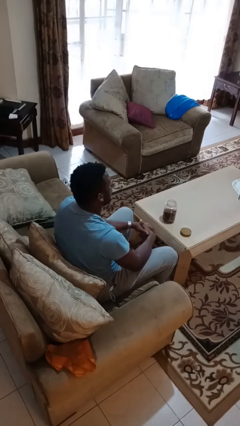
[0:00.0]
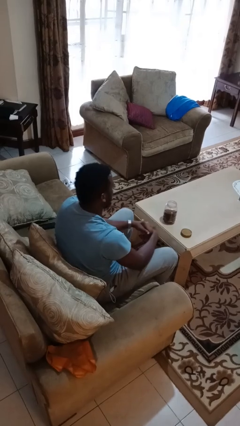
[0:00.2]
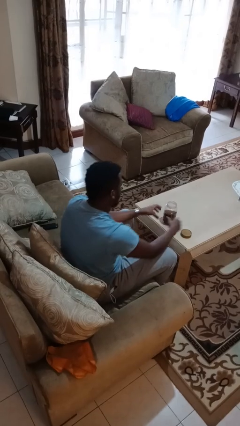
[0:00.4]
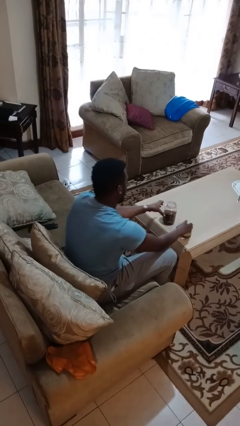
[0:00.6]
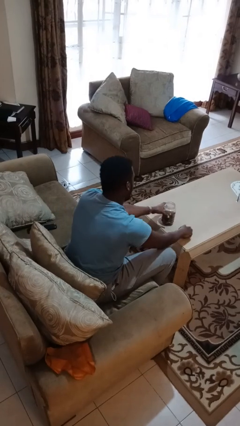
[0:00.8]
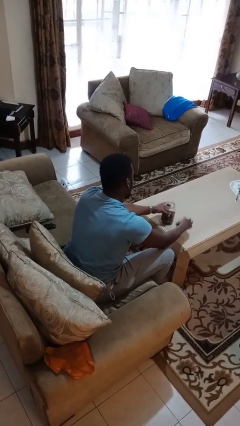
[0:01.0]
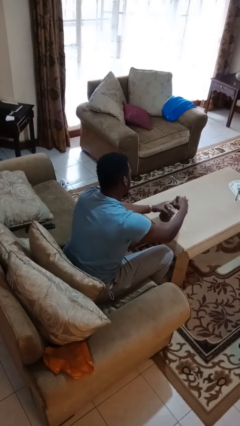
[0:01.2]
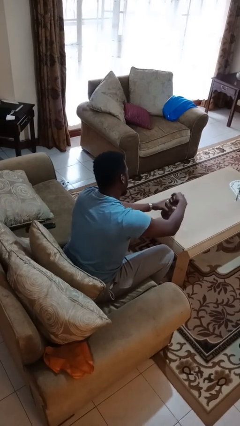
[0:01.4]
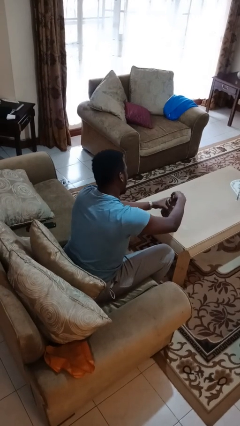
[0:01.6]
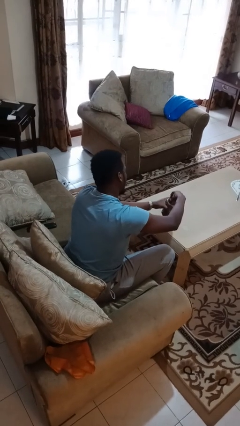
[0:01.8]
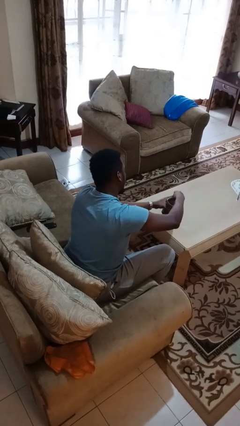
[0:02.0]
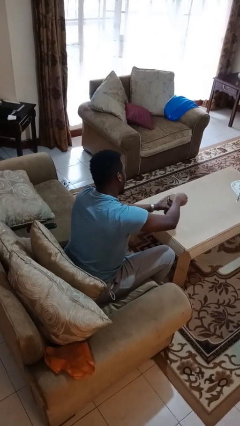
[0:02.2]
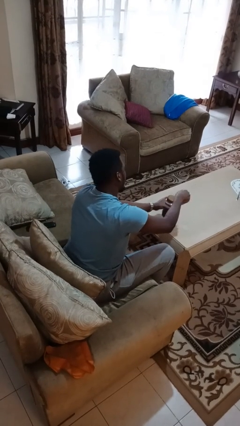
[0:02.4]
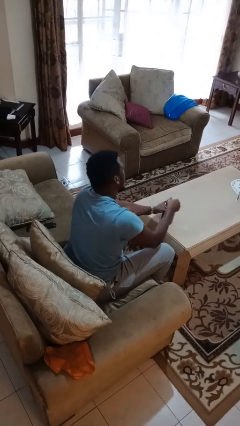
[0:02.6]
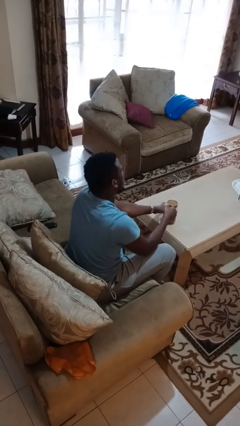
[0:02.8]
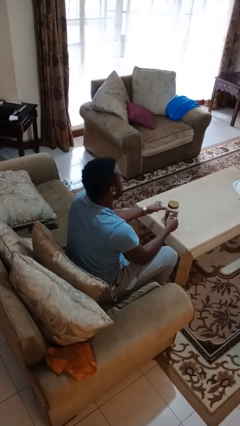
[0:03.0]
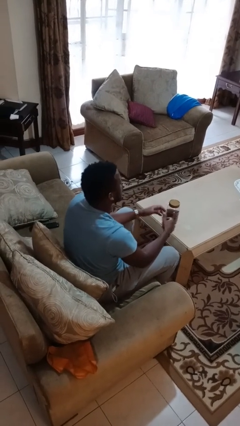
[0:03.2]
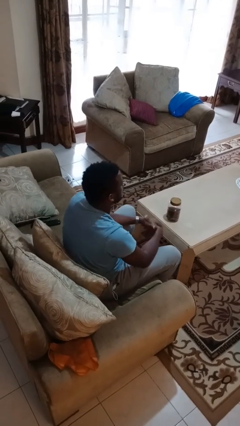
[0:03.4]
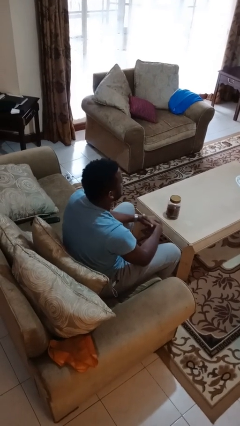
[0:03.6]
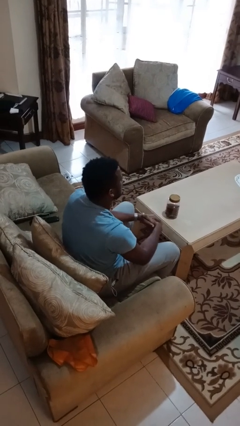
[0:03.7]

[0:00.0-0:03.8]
person closes jar

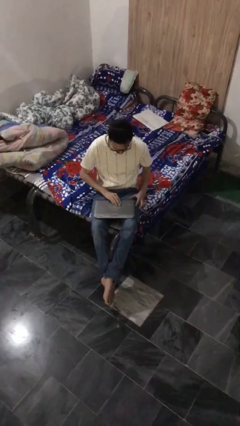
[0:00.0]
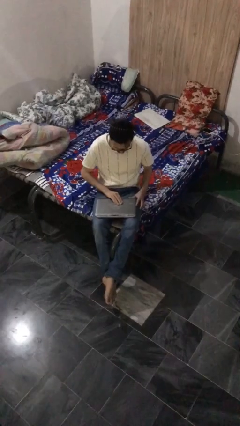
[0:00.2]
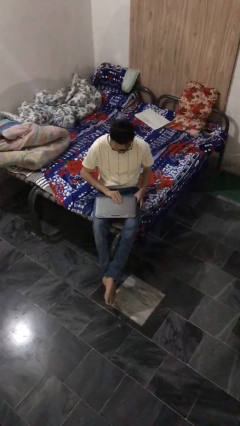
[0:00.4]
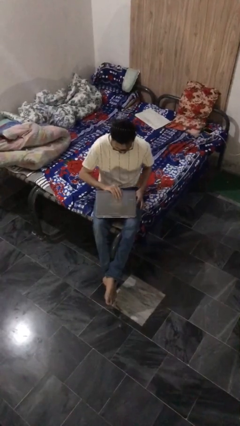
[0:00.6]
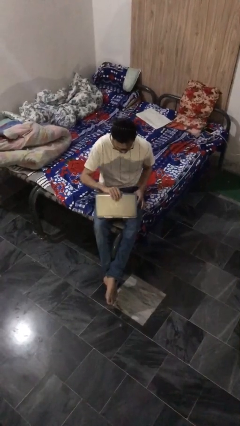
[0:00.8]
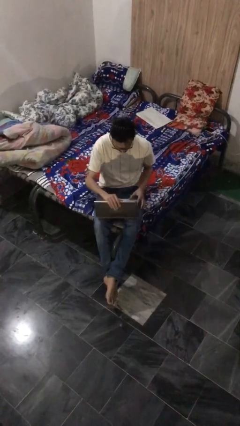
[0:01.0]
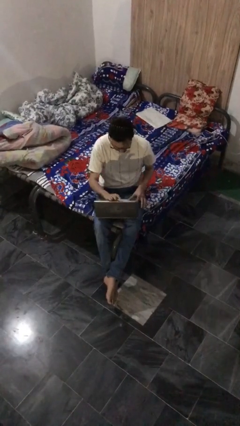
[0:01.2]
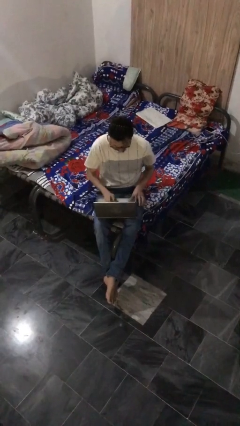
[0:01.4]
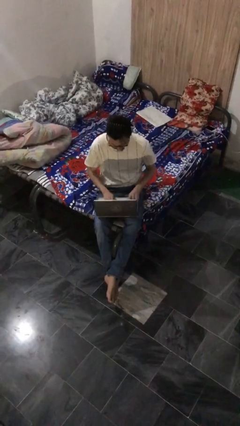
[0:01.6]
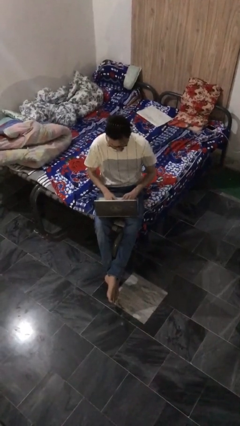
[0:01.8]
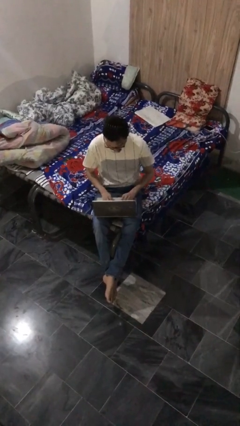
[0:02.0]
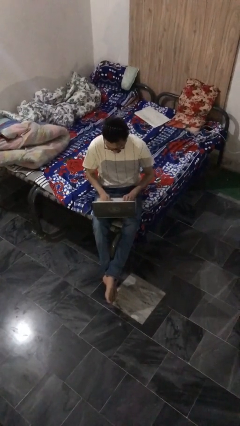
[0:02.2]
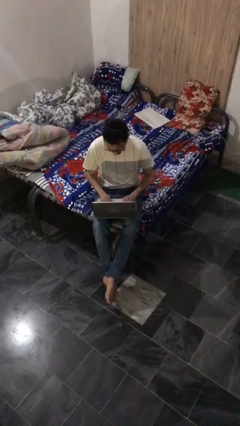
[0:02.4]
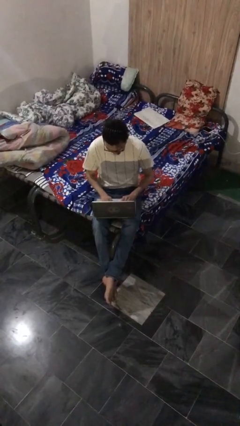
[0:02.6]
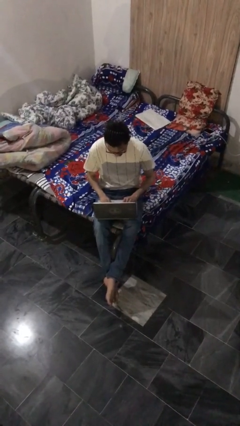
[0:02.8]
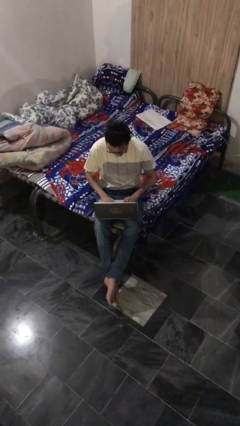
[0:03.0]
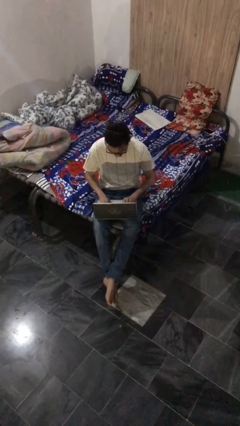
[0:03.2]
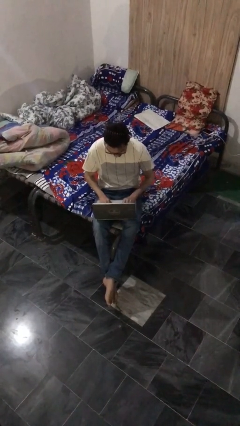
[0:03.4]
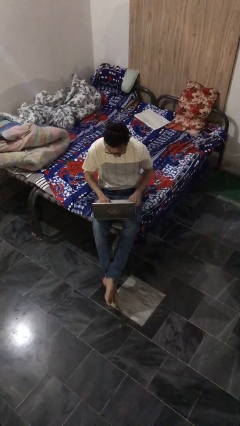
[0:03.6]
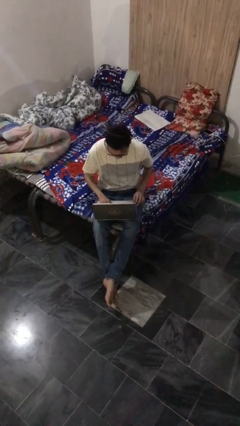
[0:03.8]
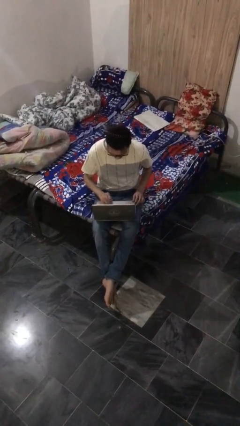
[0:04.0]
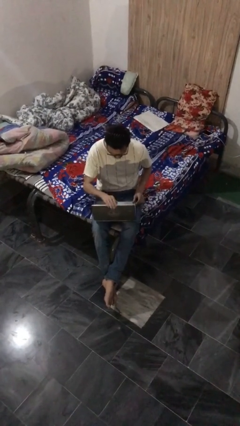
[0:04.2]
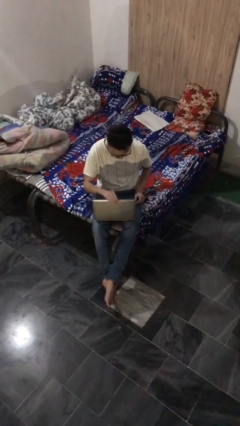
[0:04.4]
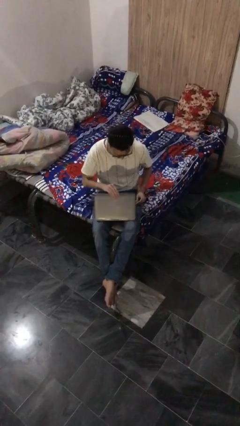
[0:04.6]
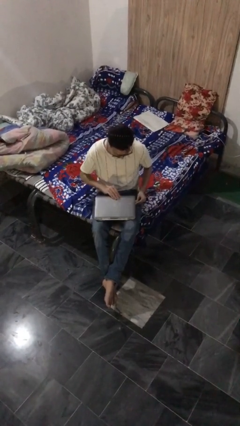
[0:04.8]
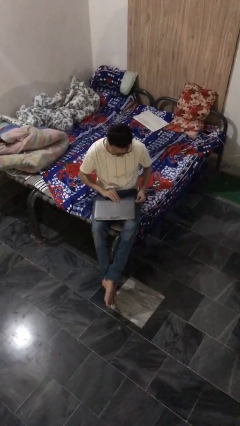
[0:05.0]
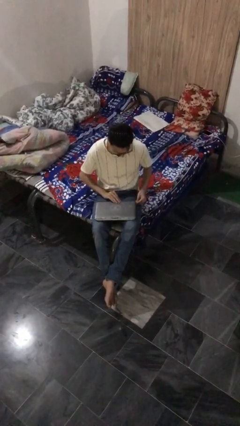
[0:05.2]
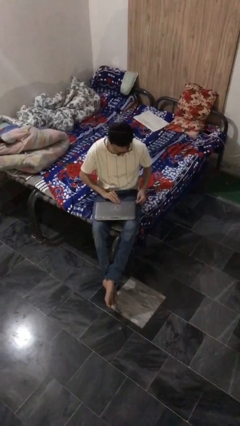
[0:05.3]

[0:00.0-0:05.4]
person interacts with laptop

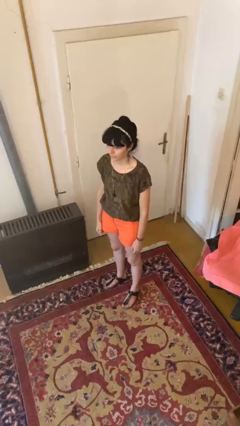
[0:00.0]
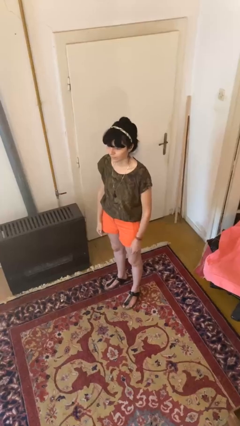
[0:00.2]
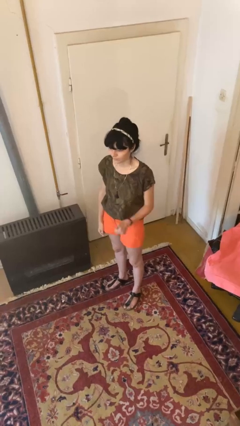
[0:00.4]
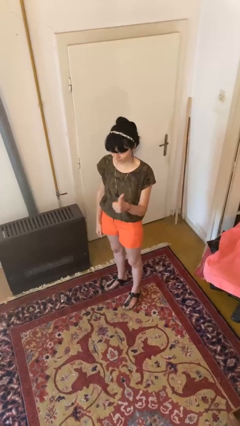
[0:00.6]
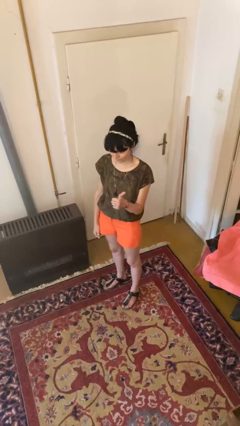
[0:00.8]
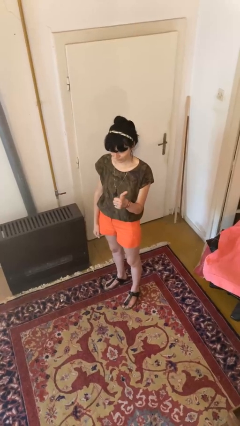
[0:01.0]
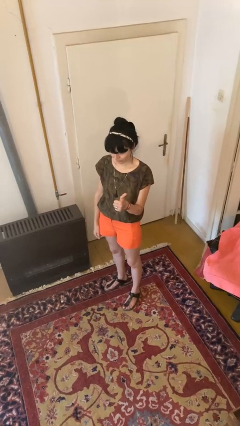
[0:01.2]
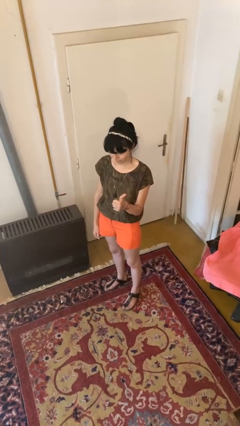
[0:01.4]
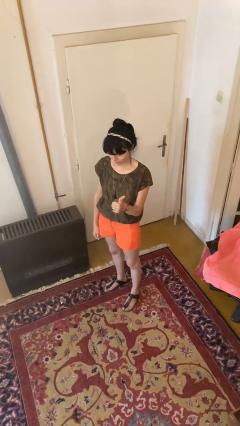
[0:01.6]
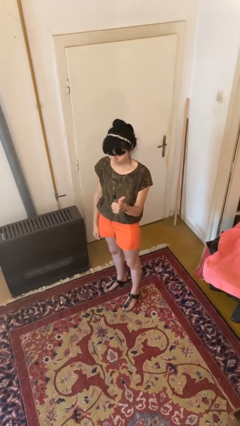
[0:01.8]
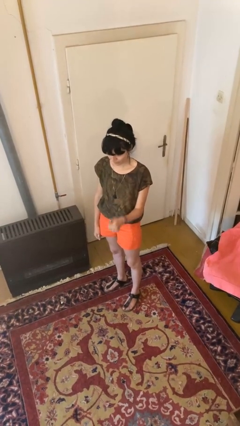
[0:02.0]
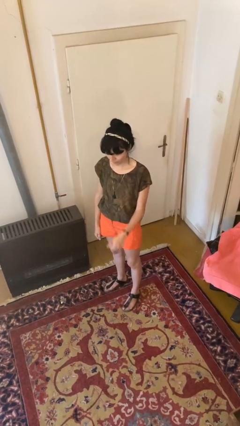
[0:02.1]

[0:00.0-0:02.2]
person gestures thumbs up

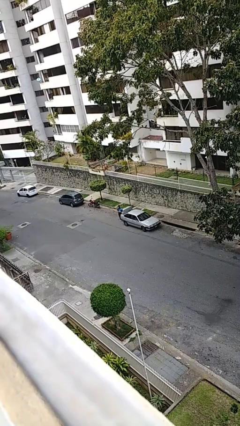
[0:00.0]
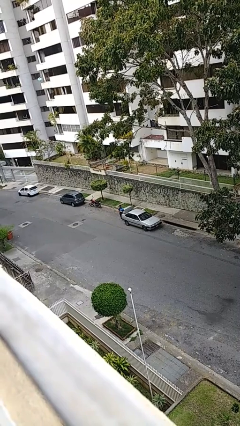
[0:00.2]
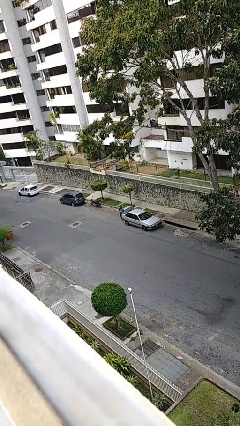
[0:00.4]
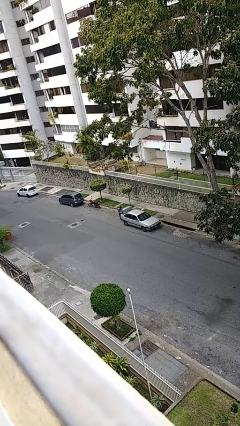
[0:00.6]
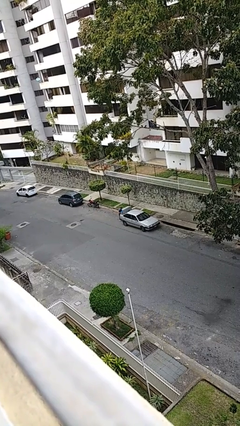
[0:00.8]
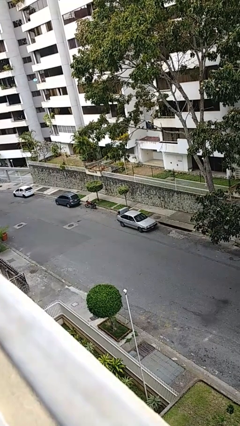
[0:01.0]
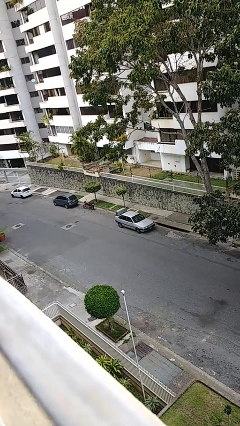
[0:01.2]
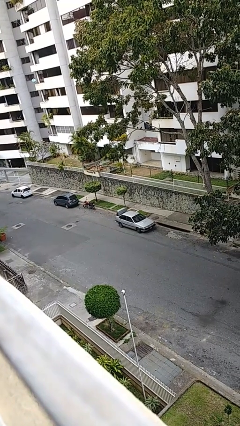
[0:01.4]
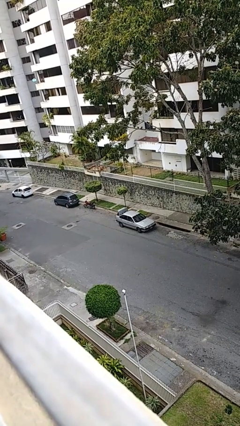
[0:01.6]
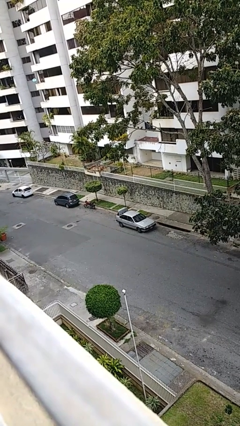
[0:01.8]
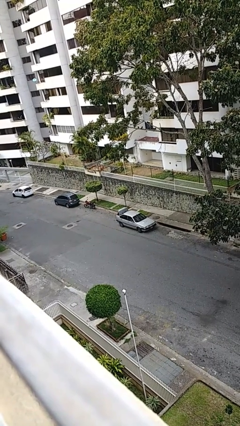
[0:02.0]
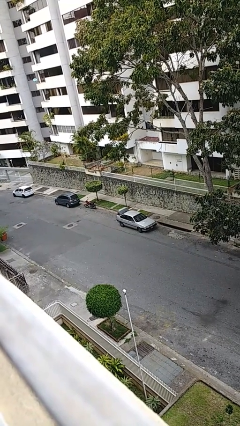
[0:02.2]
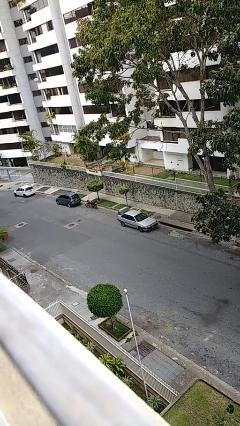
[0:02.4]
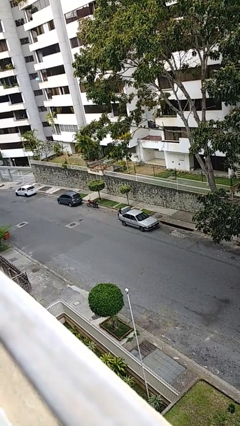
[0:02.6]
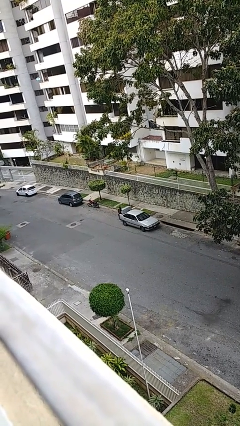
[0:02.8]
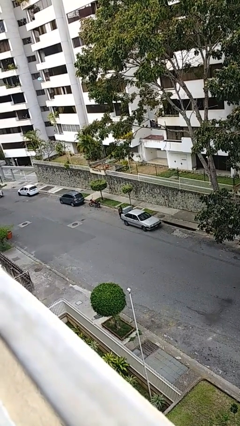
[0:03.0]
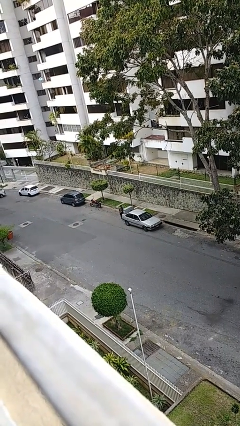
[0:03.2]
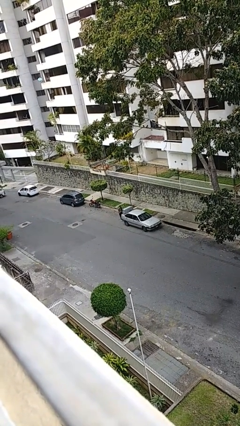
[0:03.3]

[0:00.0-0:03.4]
person loads car

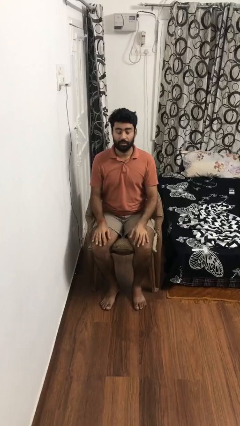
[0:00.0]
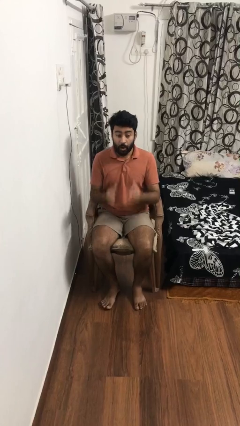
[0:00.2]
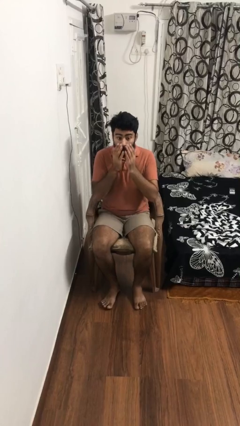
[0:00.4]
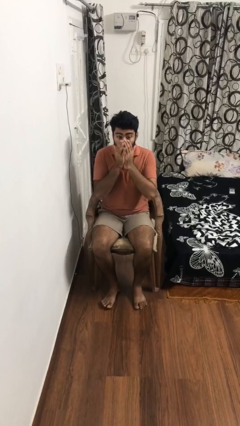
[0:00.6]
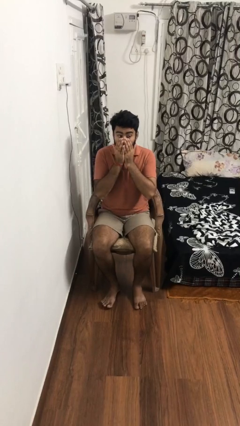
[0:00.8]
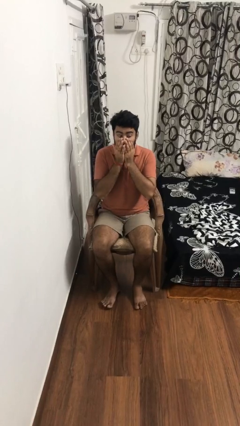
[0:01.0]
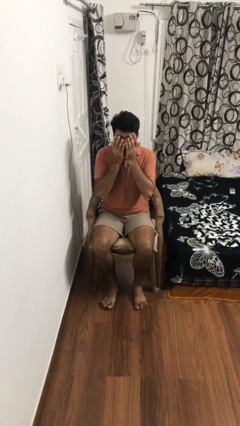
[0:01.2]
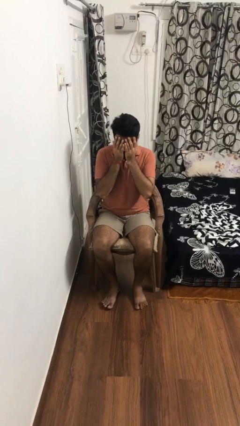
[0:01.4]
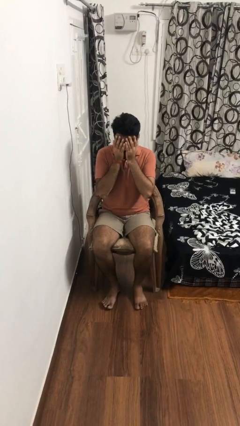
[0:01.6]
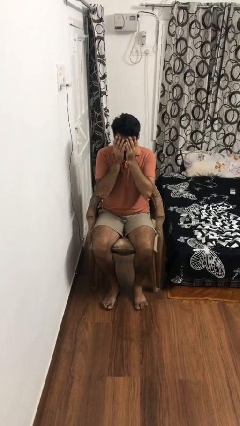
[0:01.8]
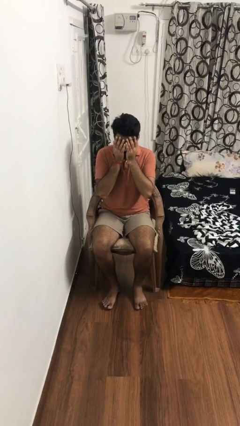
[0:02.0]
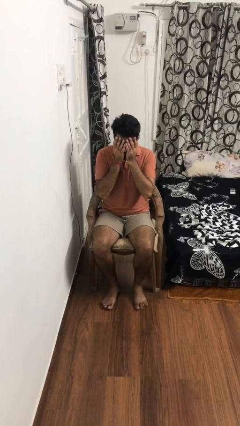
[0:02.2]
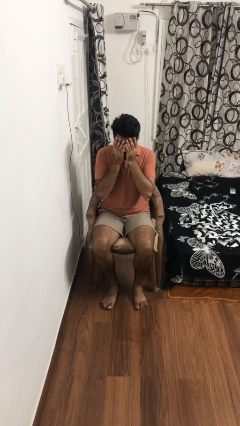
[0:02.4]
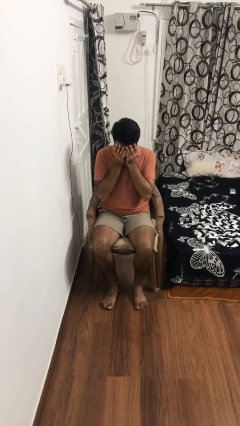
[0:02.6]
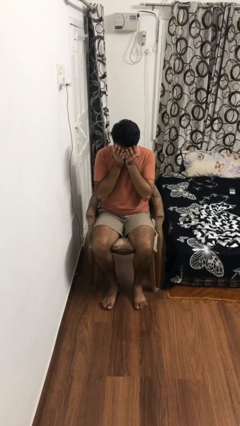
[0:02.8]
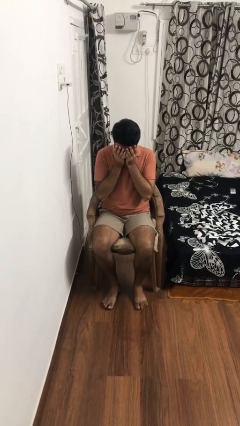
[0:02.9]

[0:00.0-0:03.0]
person covers face with hands
